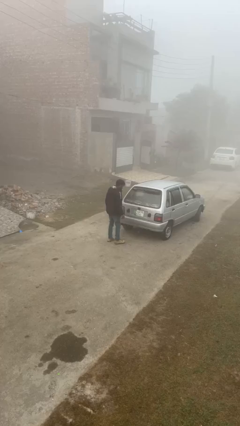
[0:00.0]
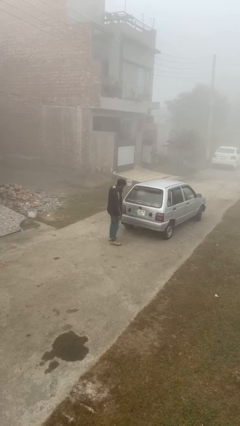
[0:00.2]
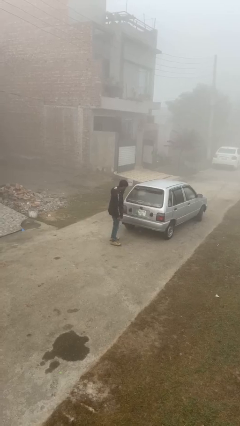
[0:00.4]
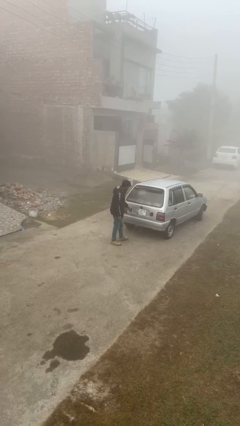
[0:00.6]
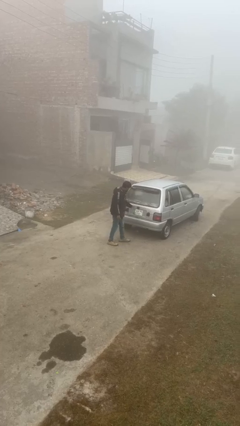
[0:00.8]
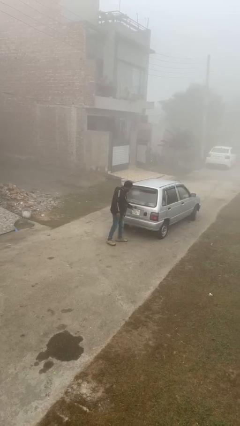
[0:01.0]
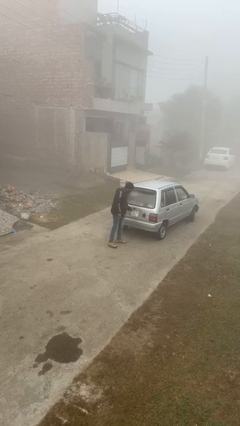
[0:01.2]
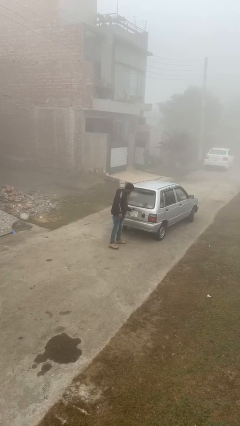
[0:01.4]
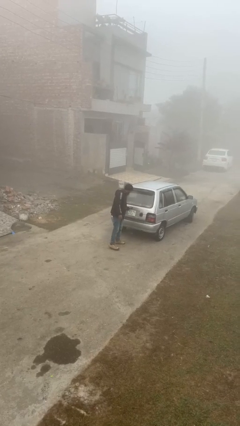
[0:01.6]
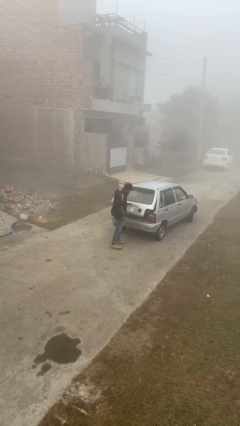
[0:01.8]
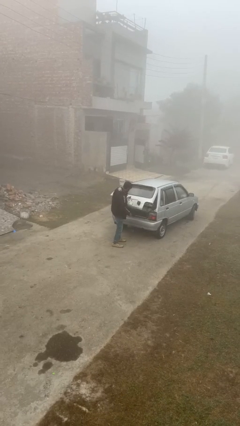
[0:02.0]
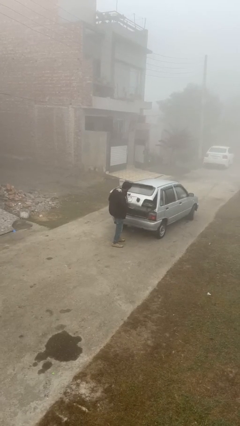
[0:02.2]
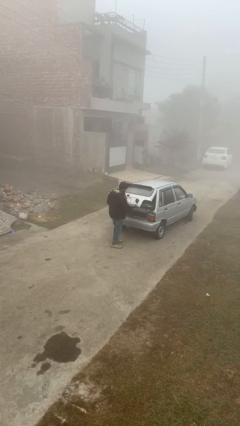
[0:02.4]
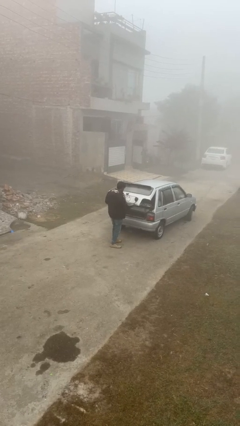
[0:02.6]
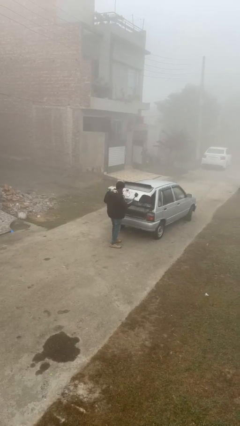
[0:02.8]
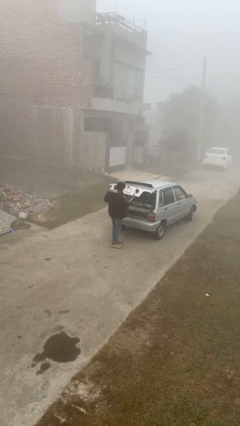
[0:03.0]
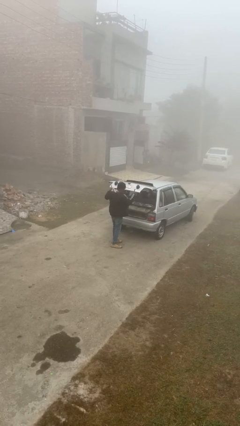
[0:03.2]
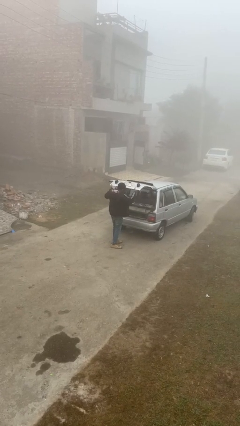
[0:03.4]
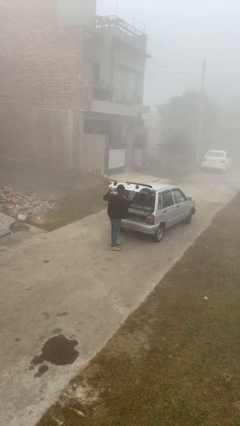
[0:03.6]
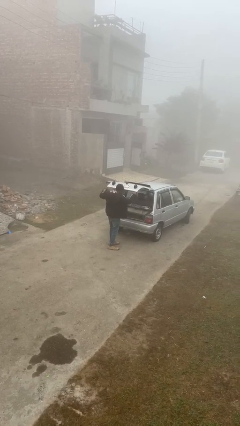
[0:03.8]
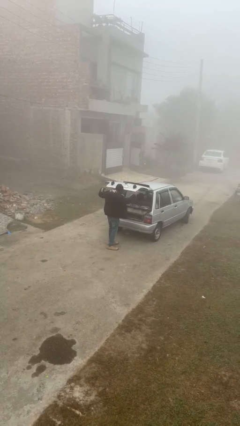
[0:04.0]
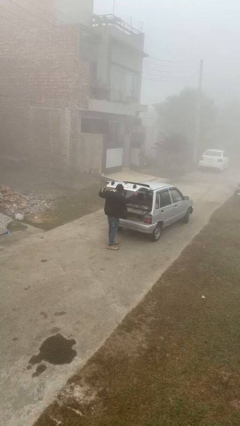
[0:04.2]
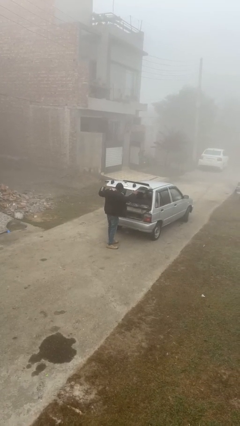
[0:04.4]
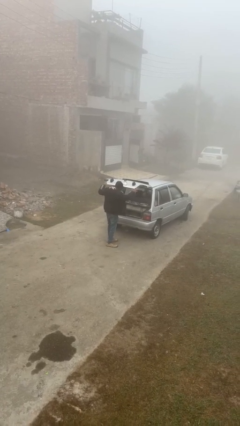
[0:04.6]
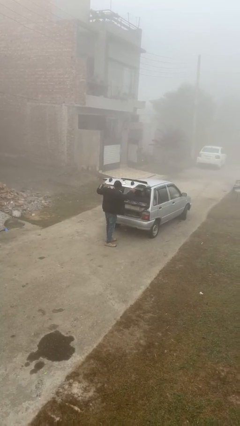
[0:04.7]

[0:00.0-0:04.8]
person opens car trunk

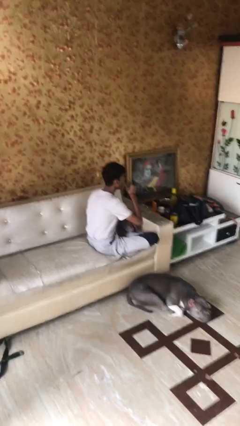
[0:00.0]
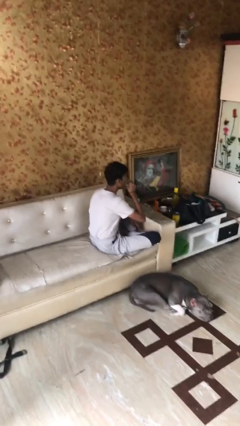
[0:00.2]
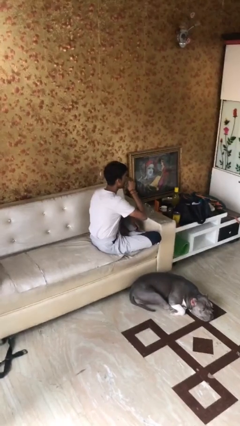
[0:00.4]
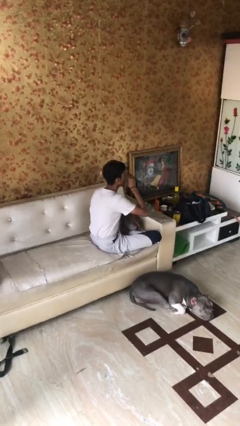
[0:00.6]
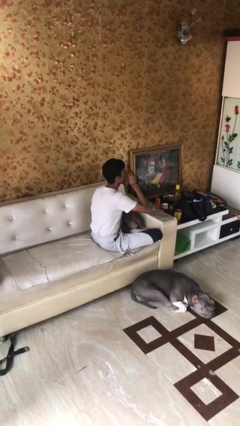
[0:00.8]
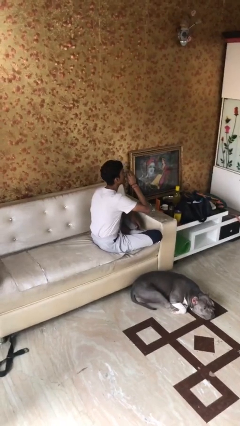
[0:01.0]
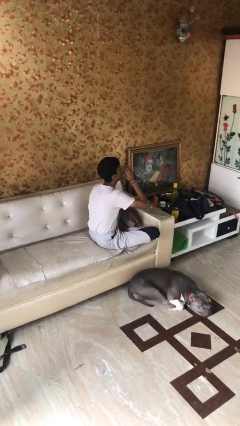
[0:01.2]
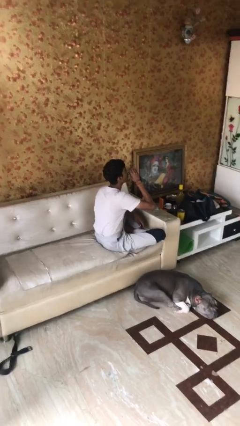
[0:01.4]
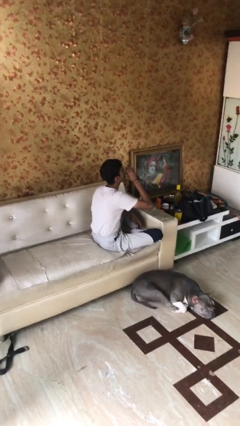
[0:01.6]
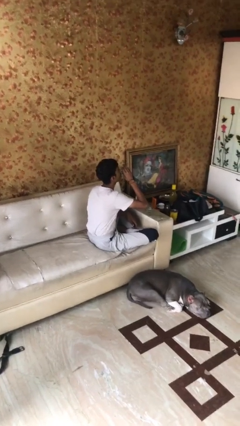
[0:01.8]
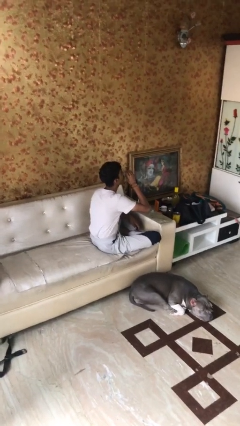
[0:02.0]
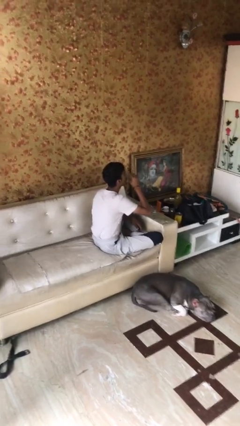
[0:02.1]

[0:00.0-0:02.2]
person drinks from shotglass

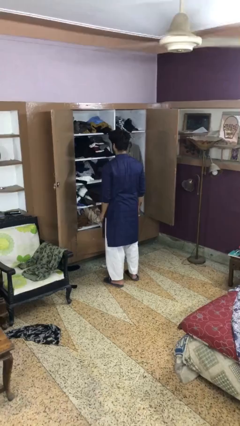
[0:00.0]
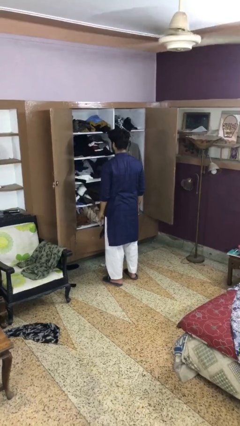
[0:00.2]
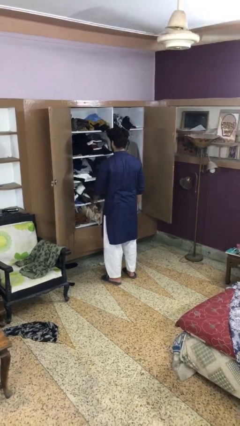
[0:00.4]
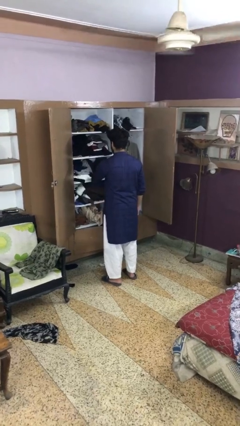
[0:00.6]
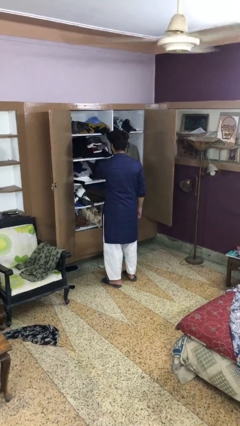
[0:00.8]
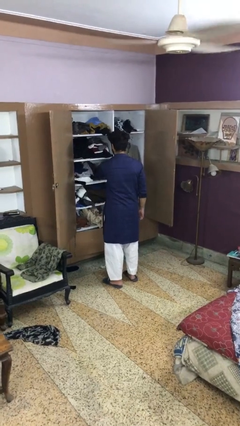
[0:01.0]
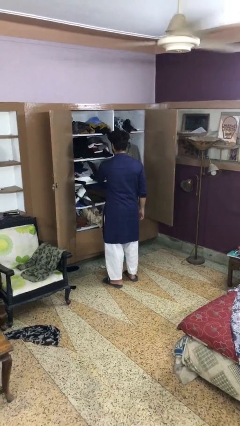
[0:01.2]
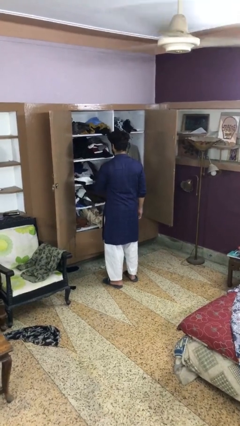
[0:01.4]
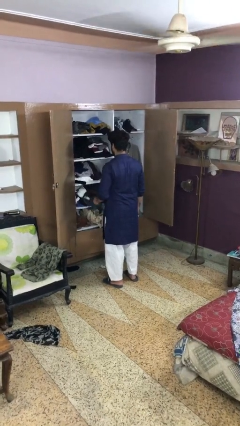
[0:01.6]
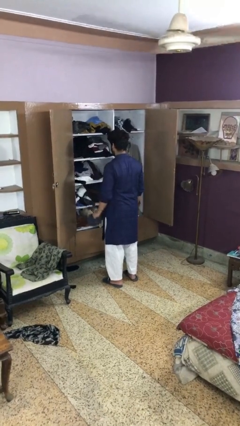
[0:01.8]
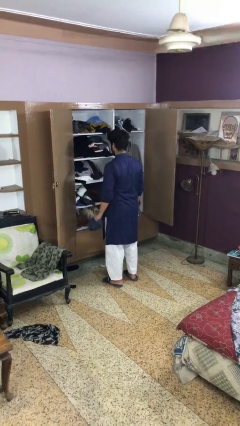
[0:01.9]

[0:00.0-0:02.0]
person takes clothes from dresser

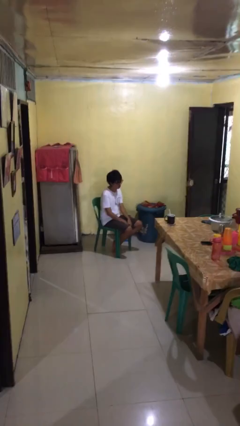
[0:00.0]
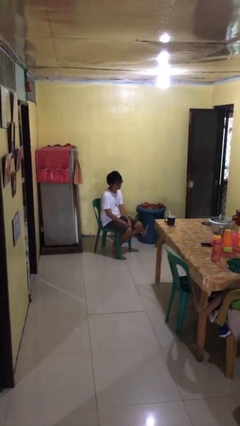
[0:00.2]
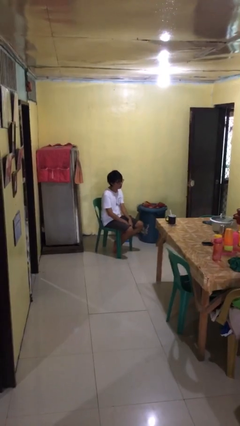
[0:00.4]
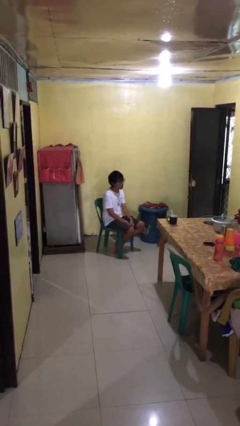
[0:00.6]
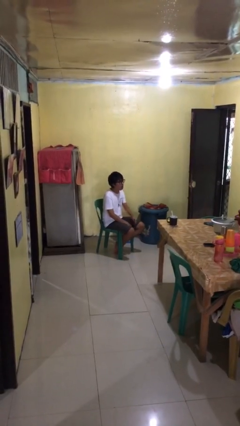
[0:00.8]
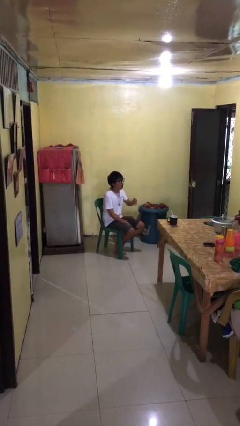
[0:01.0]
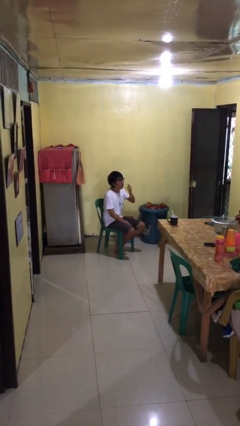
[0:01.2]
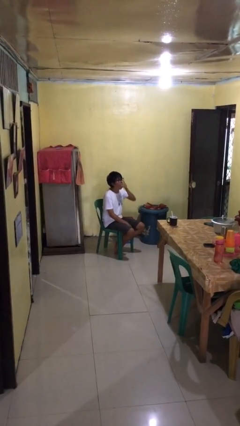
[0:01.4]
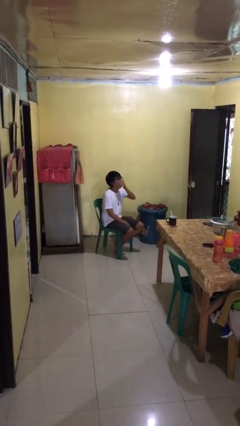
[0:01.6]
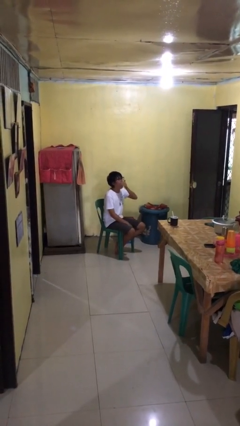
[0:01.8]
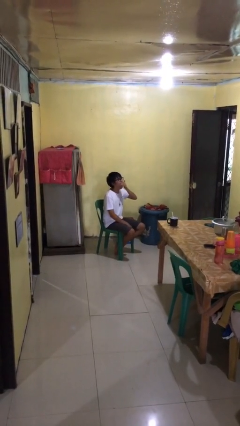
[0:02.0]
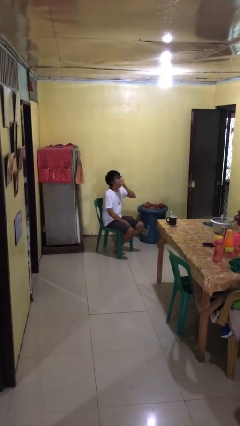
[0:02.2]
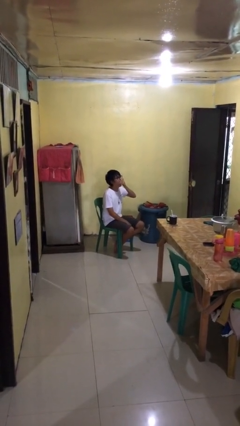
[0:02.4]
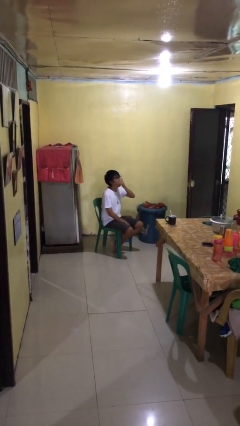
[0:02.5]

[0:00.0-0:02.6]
person yawns

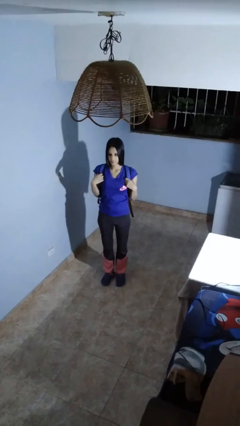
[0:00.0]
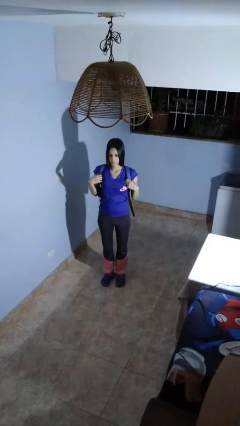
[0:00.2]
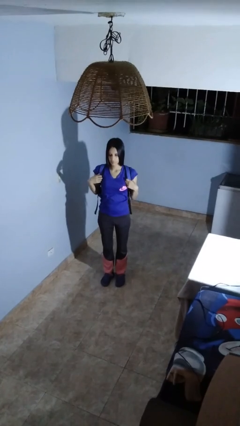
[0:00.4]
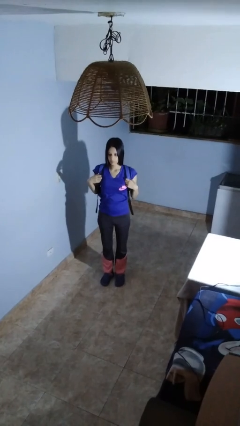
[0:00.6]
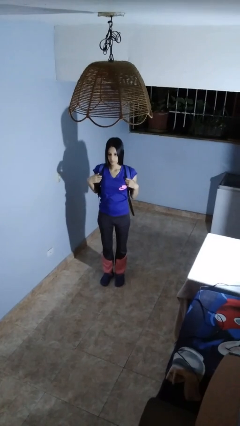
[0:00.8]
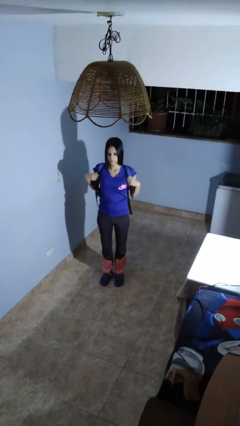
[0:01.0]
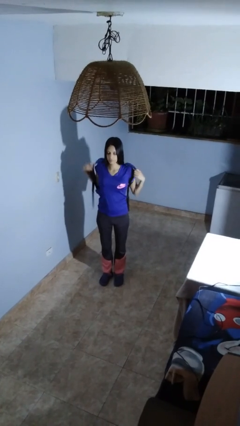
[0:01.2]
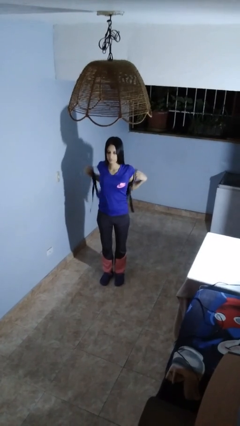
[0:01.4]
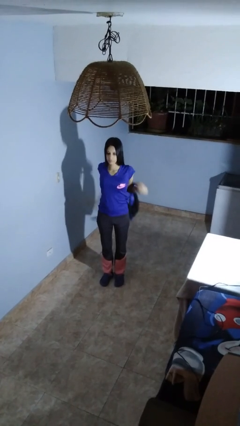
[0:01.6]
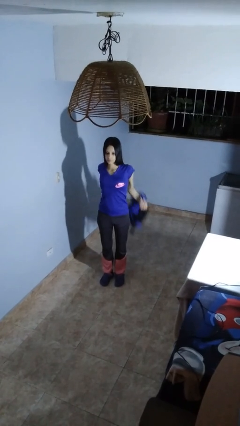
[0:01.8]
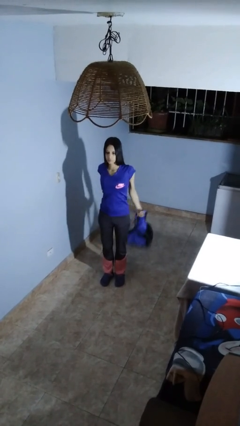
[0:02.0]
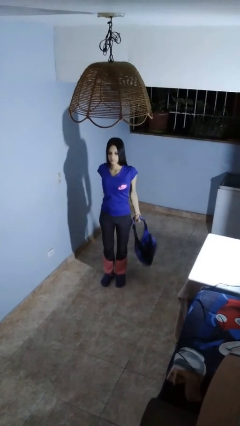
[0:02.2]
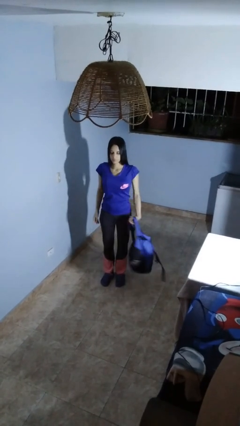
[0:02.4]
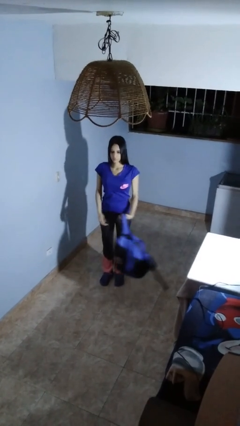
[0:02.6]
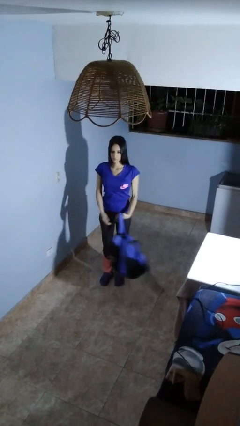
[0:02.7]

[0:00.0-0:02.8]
person takes off backpack

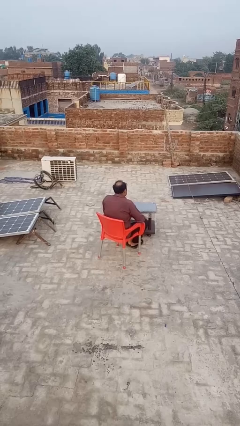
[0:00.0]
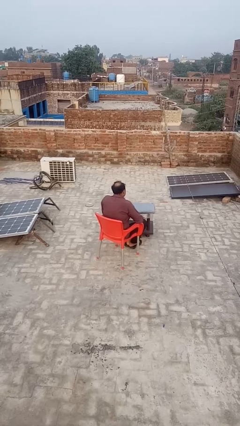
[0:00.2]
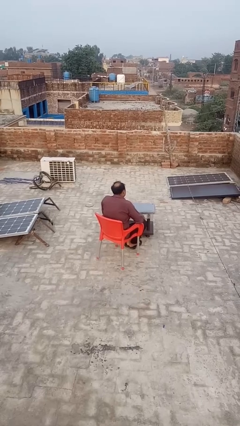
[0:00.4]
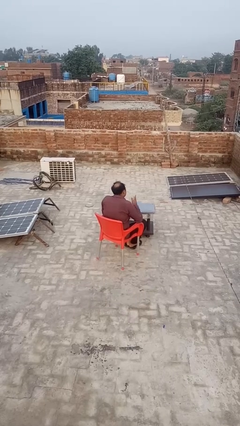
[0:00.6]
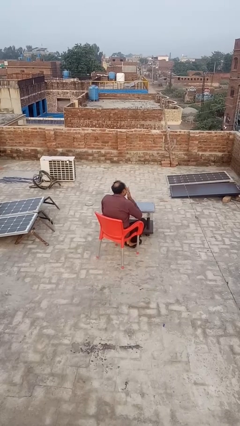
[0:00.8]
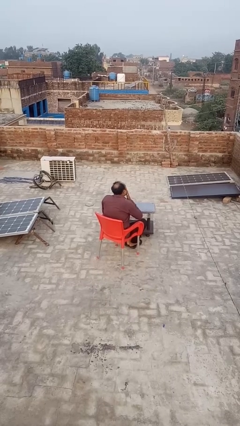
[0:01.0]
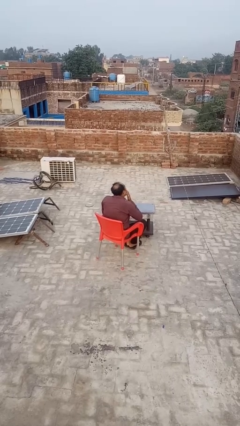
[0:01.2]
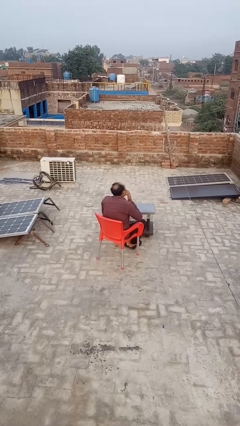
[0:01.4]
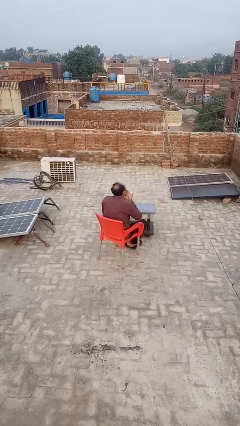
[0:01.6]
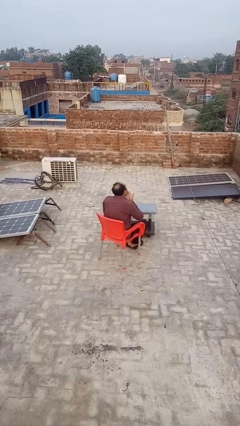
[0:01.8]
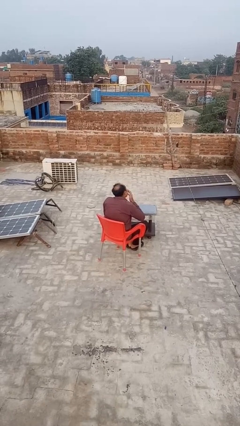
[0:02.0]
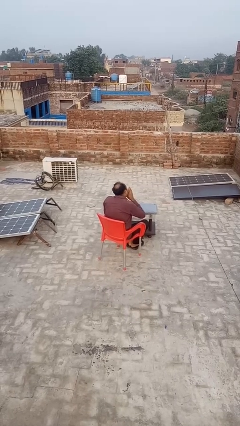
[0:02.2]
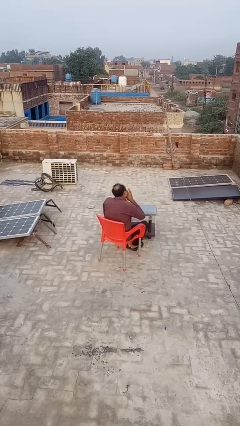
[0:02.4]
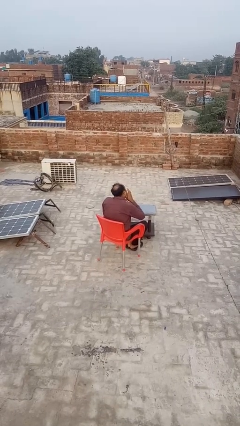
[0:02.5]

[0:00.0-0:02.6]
person licks fingers

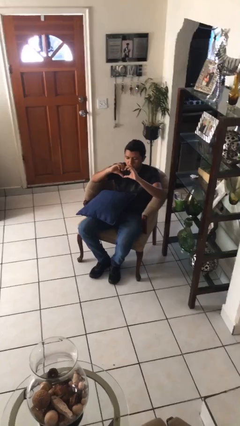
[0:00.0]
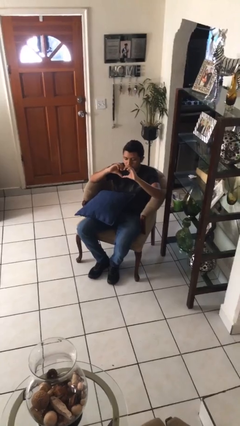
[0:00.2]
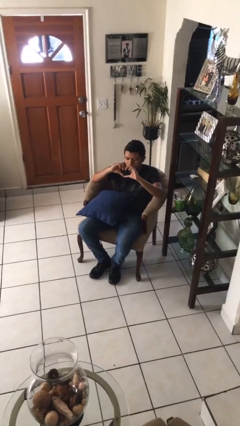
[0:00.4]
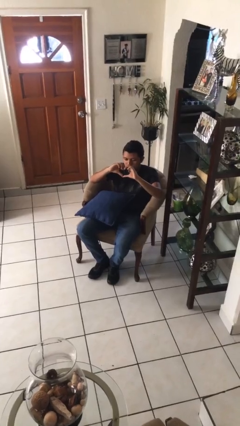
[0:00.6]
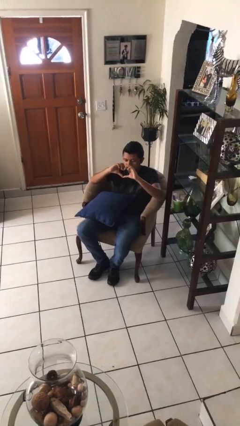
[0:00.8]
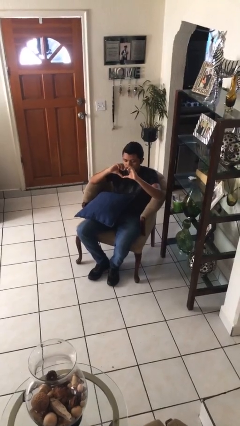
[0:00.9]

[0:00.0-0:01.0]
person gestures heart
